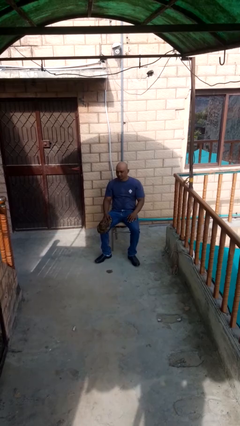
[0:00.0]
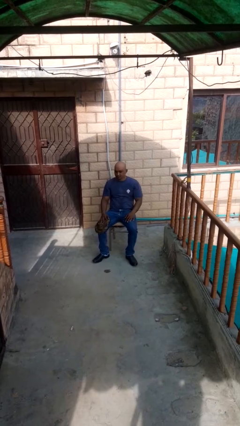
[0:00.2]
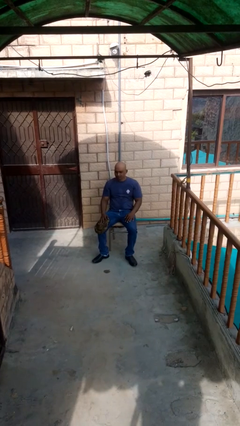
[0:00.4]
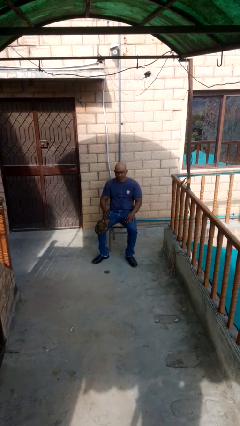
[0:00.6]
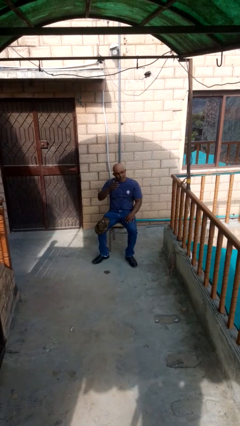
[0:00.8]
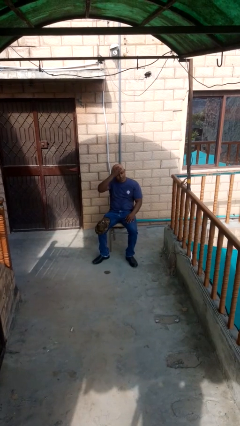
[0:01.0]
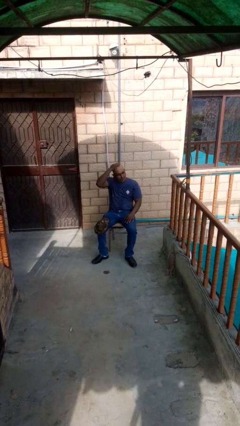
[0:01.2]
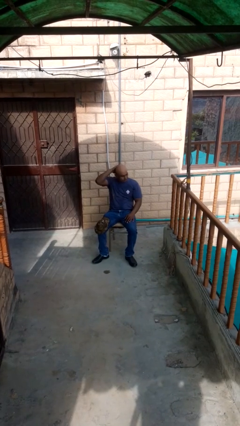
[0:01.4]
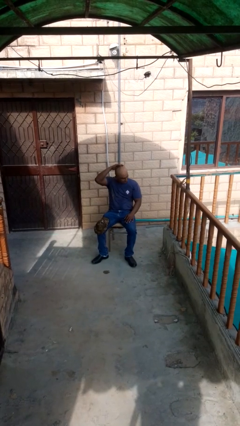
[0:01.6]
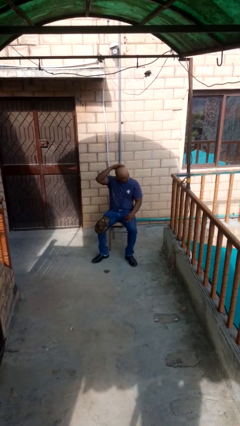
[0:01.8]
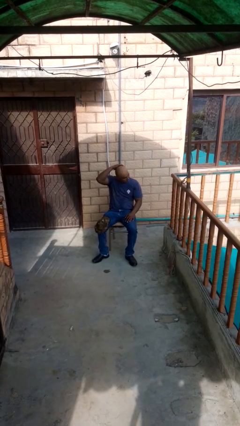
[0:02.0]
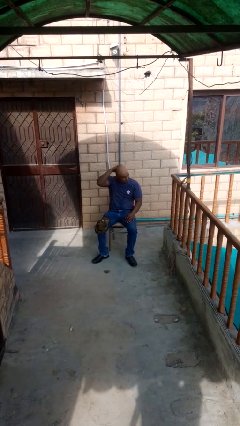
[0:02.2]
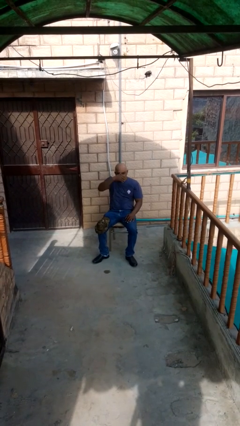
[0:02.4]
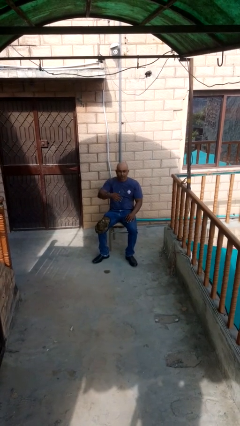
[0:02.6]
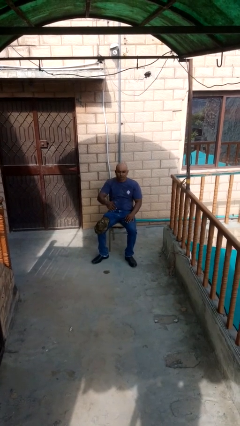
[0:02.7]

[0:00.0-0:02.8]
person strokes hair

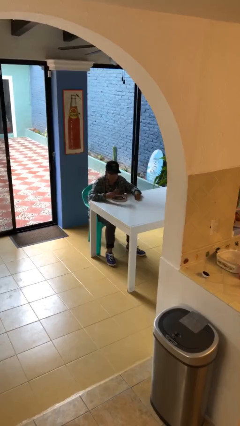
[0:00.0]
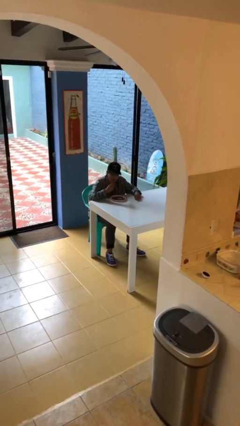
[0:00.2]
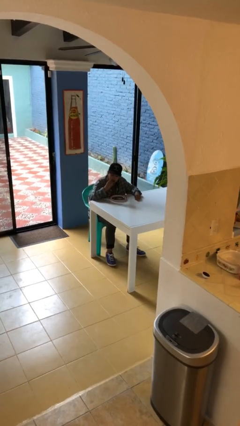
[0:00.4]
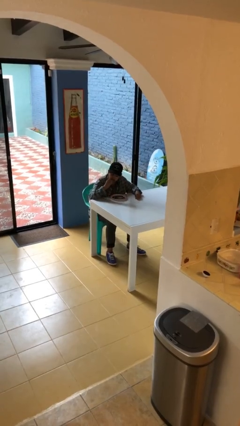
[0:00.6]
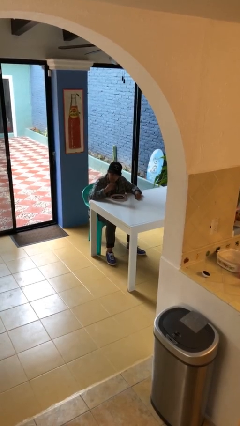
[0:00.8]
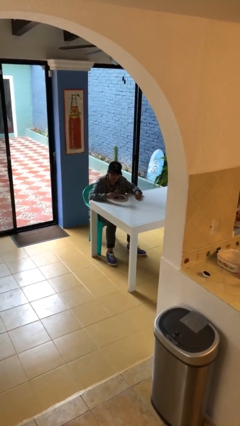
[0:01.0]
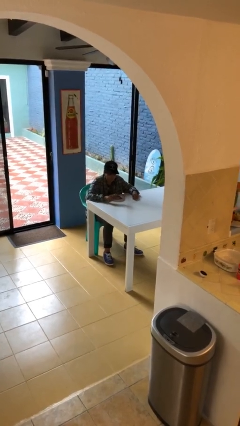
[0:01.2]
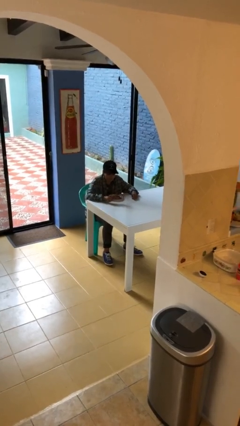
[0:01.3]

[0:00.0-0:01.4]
person eats with hands

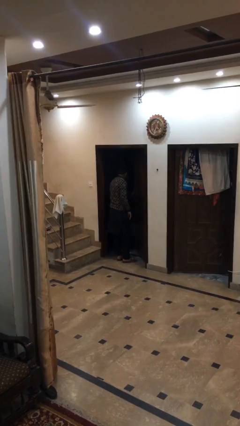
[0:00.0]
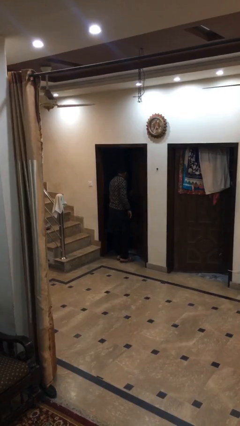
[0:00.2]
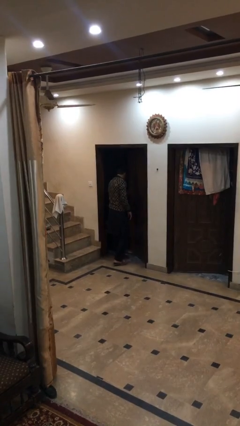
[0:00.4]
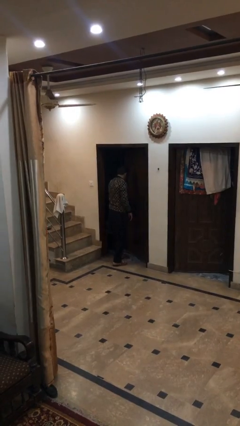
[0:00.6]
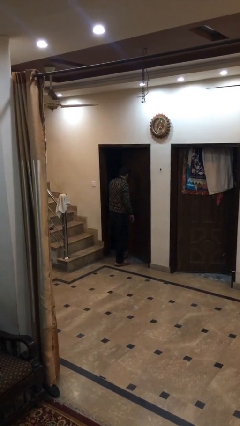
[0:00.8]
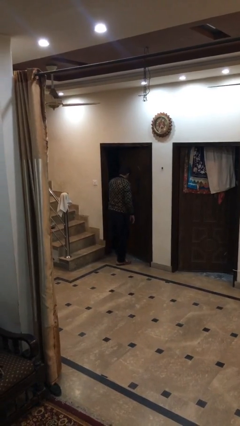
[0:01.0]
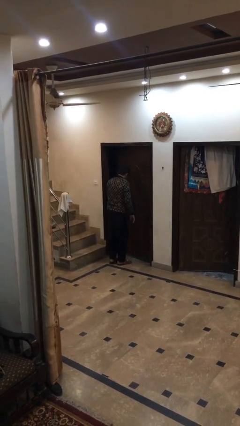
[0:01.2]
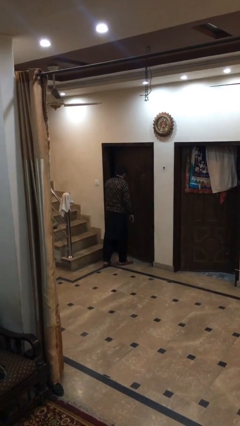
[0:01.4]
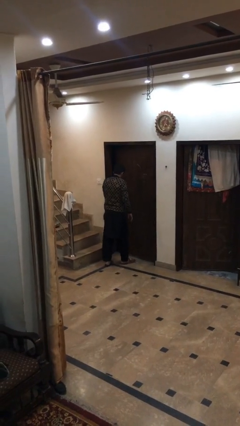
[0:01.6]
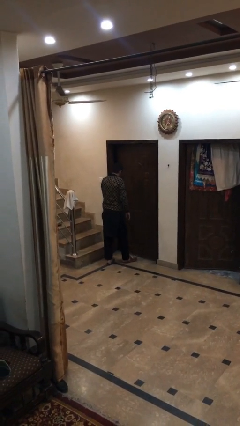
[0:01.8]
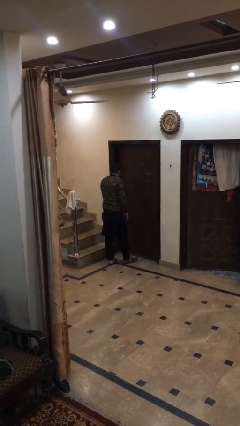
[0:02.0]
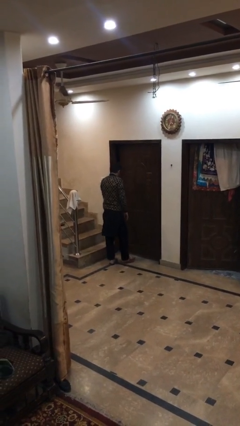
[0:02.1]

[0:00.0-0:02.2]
person closes facility door

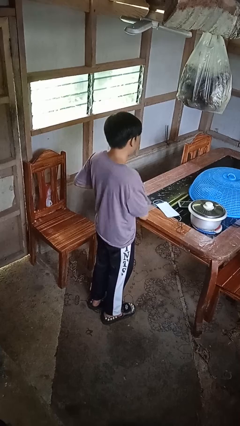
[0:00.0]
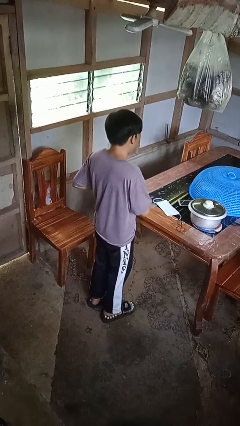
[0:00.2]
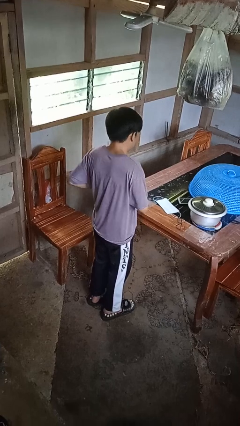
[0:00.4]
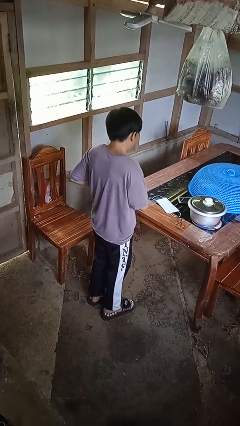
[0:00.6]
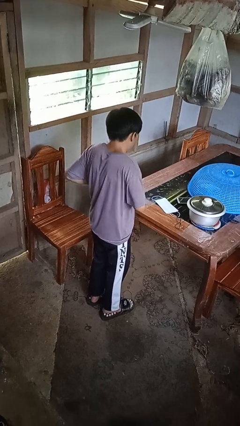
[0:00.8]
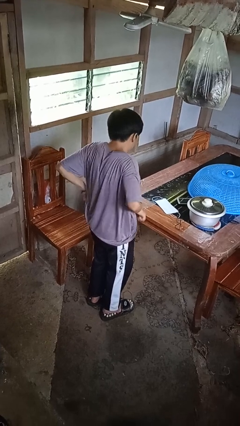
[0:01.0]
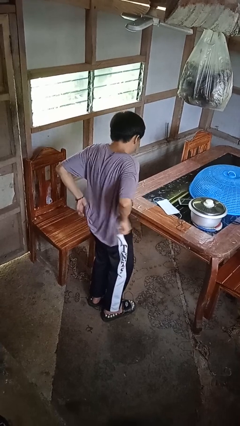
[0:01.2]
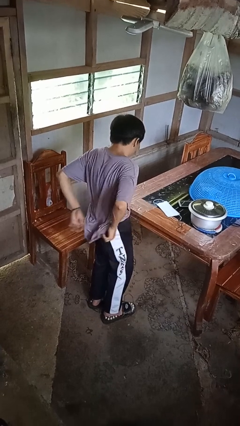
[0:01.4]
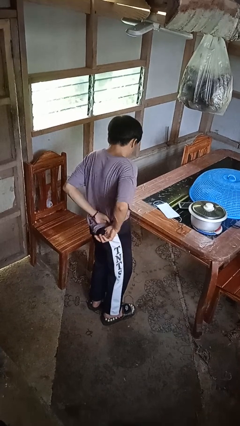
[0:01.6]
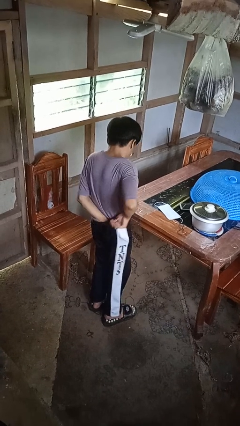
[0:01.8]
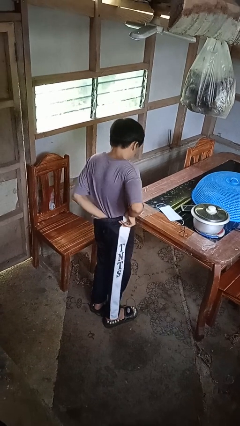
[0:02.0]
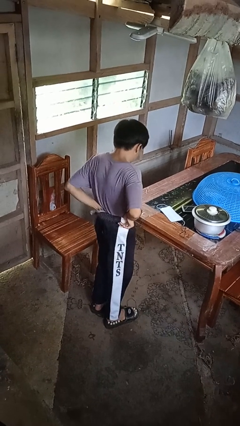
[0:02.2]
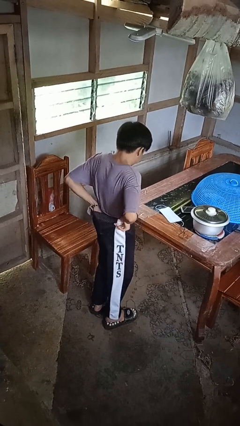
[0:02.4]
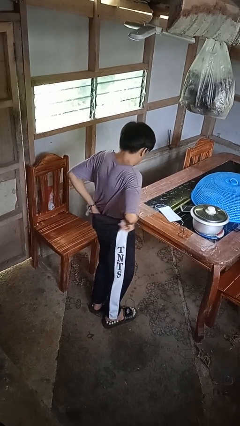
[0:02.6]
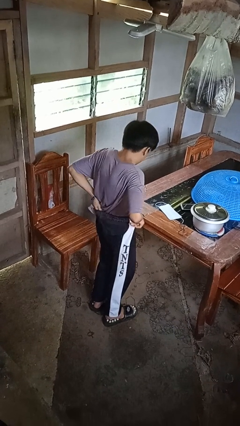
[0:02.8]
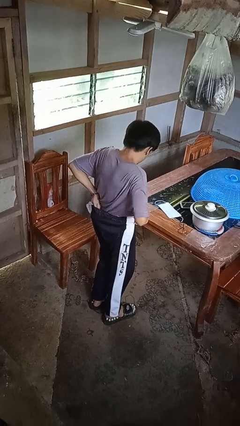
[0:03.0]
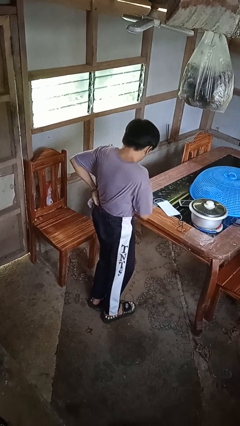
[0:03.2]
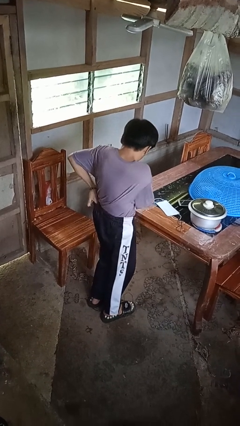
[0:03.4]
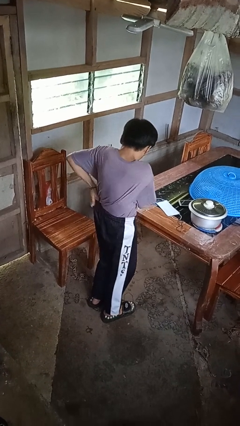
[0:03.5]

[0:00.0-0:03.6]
person tucks in shirt

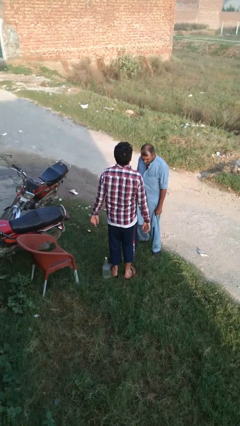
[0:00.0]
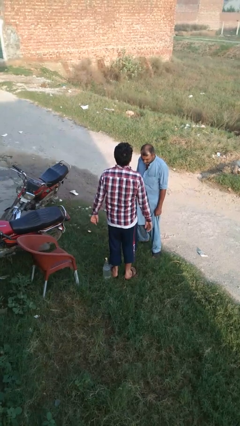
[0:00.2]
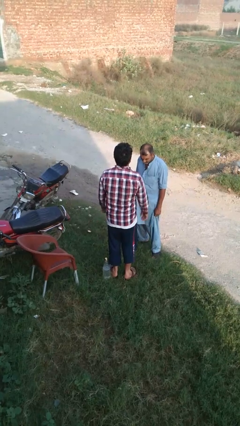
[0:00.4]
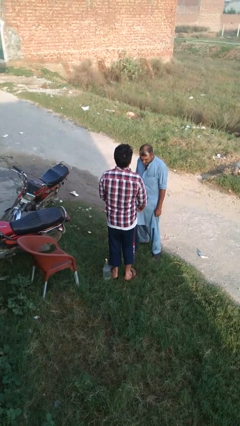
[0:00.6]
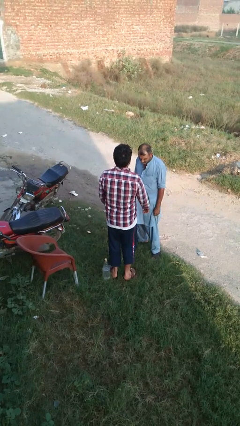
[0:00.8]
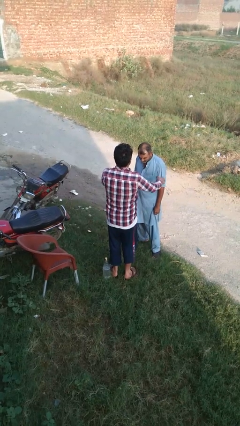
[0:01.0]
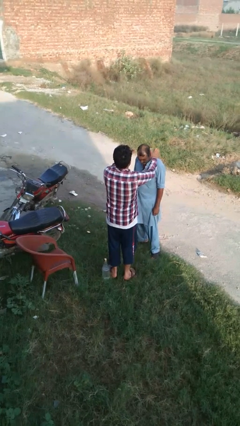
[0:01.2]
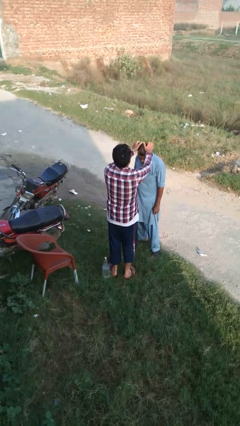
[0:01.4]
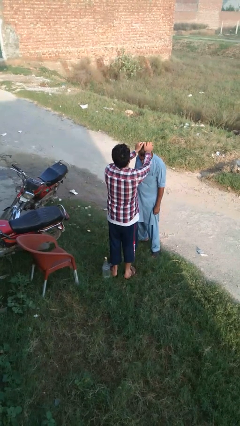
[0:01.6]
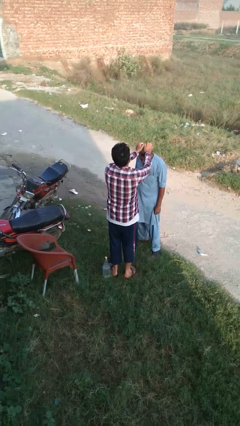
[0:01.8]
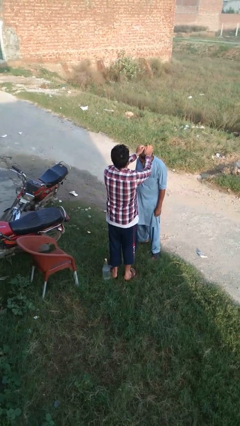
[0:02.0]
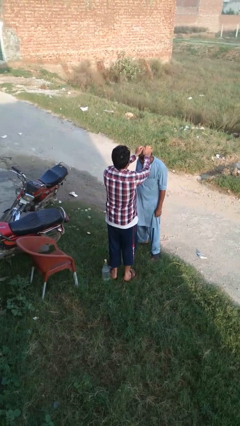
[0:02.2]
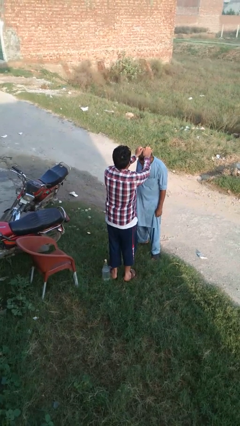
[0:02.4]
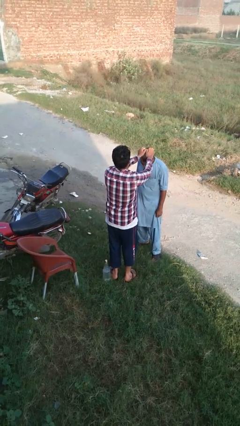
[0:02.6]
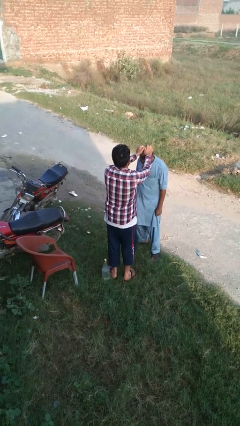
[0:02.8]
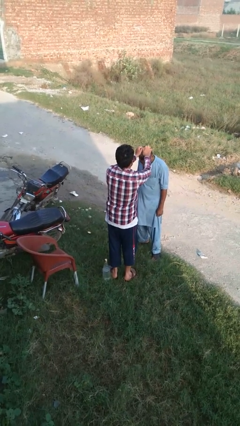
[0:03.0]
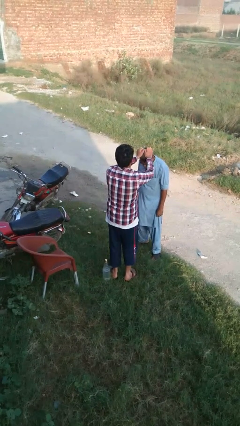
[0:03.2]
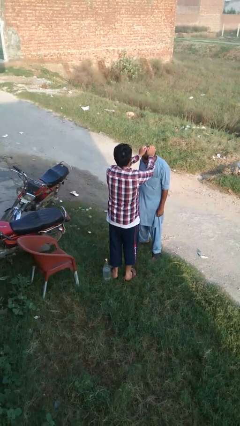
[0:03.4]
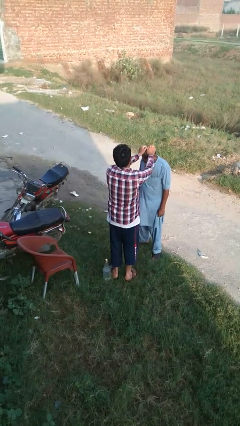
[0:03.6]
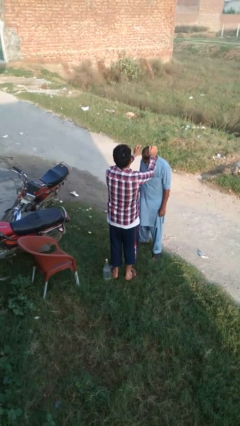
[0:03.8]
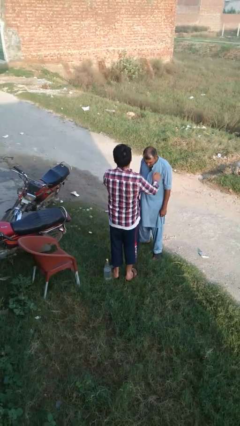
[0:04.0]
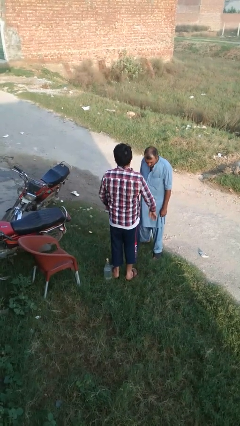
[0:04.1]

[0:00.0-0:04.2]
person grabs person by hair

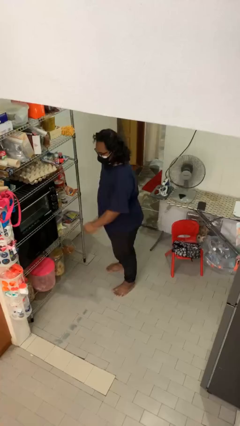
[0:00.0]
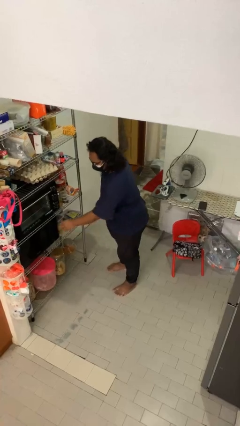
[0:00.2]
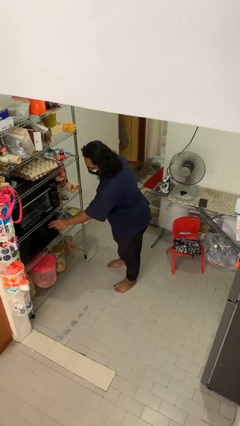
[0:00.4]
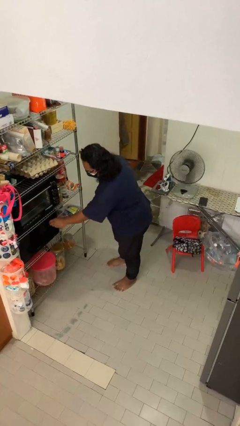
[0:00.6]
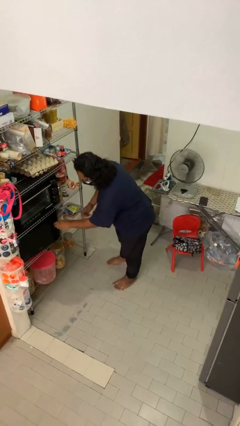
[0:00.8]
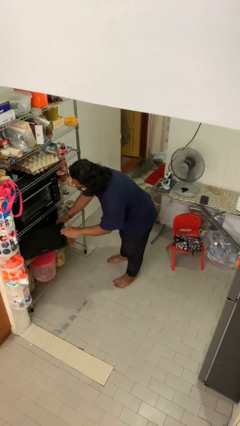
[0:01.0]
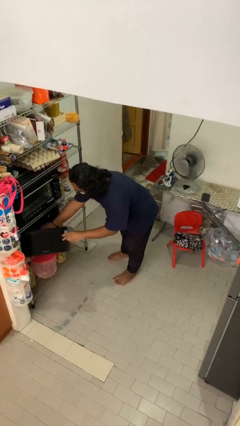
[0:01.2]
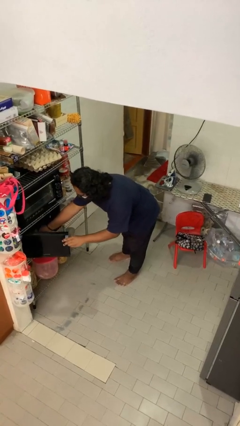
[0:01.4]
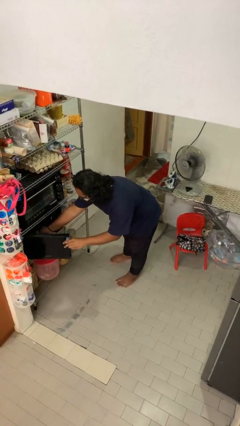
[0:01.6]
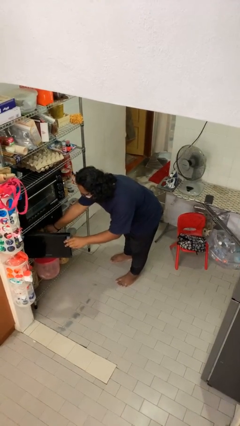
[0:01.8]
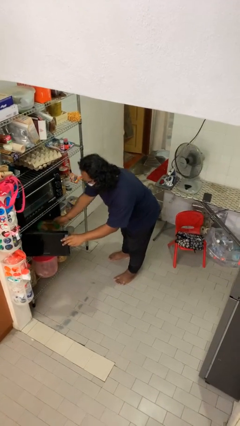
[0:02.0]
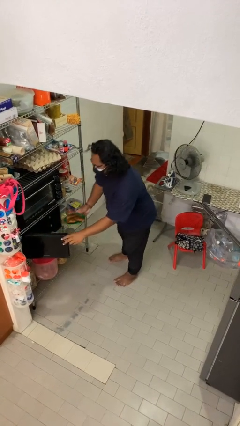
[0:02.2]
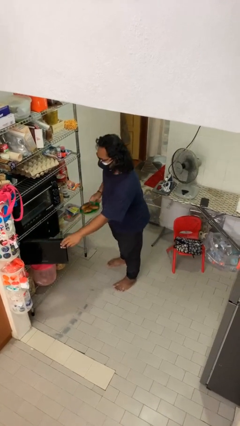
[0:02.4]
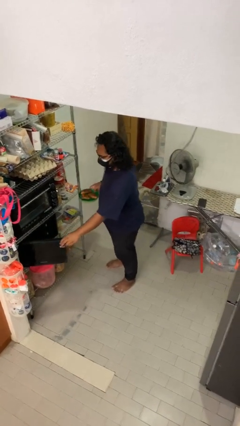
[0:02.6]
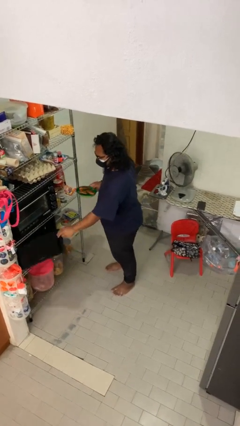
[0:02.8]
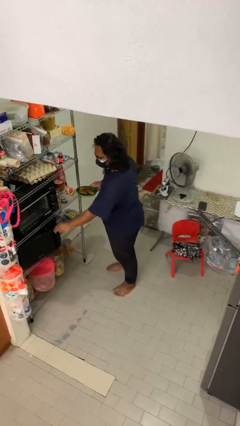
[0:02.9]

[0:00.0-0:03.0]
person takes object from microwave

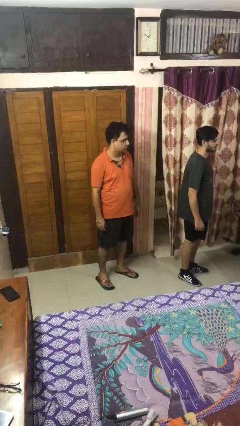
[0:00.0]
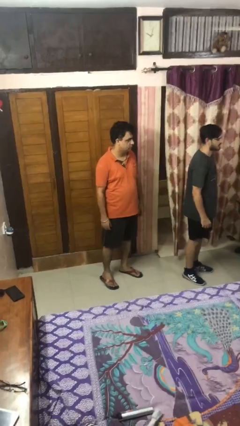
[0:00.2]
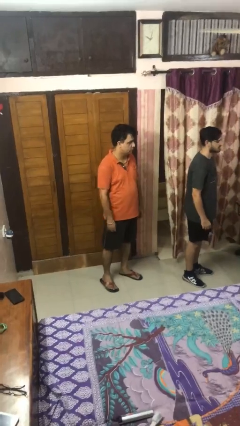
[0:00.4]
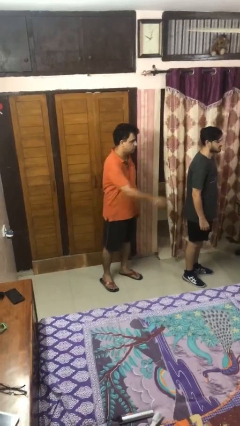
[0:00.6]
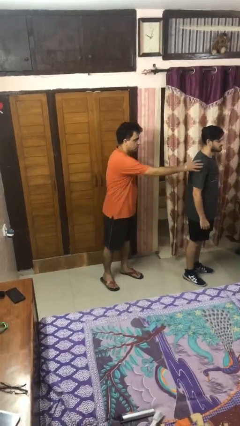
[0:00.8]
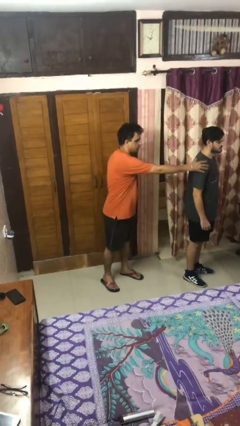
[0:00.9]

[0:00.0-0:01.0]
person grabs person by shoulder
